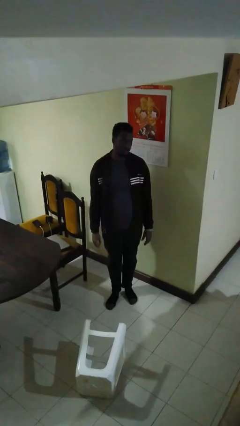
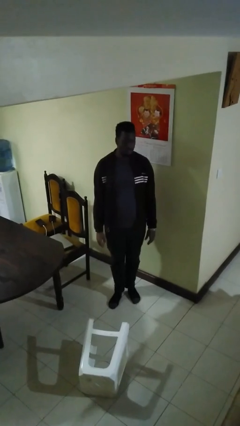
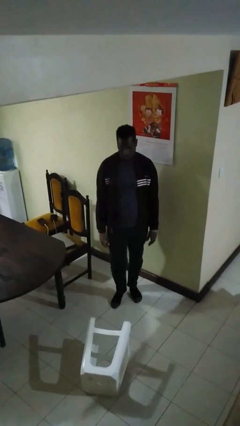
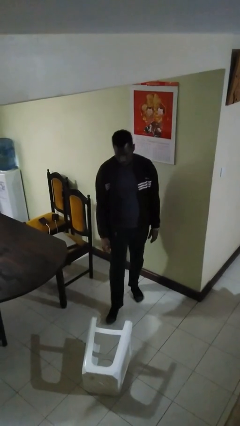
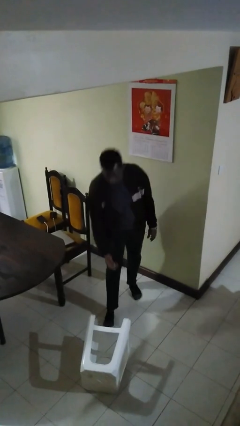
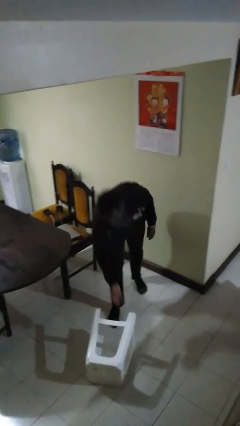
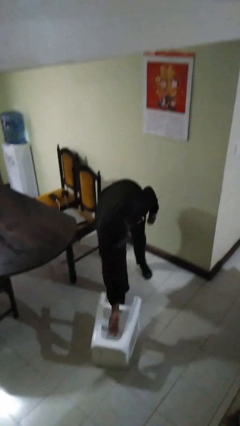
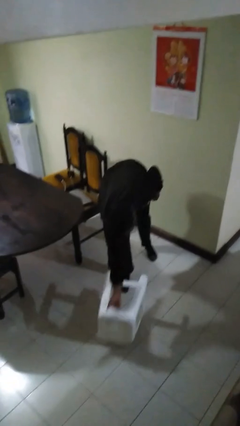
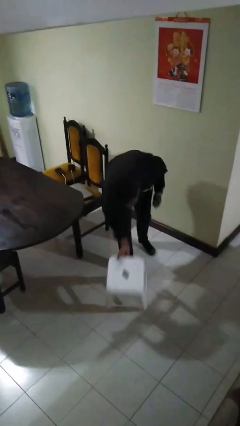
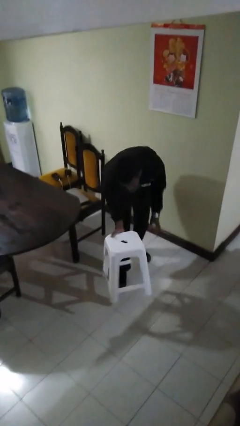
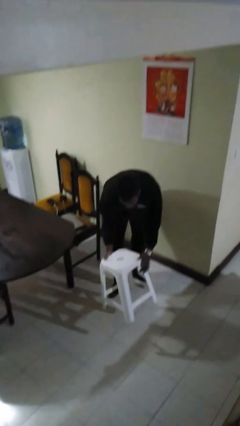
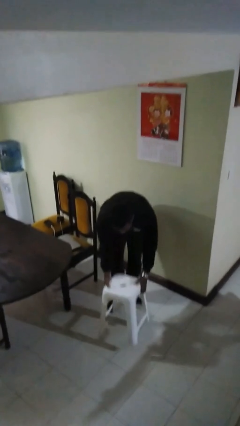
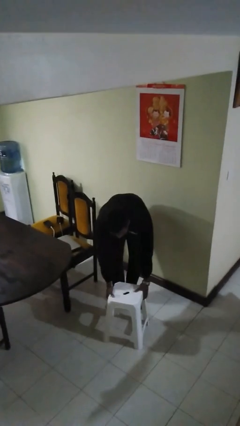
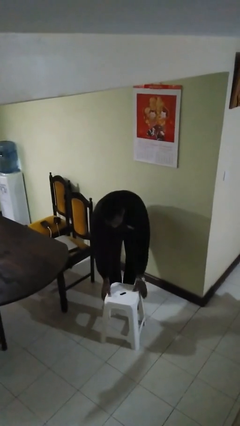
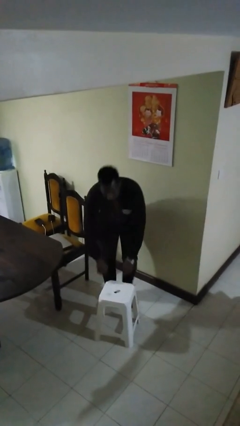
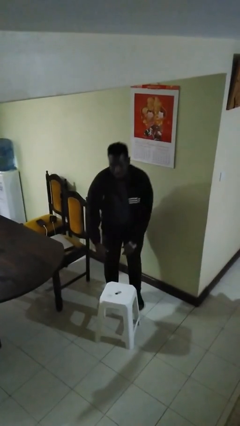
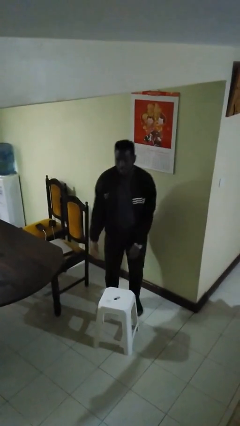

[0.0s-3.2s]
person sets upright furniture

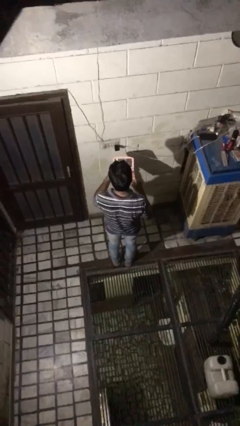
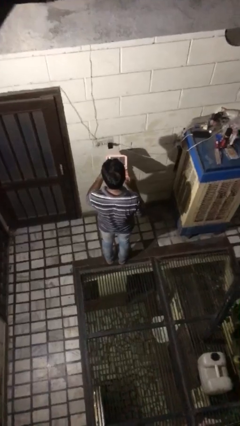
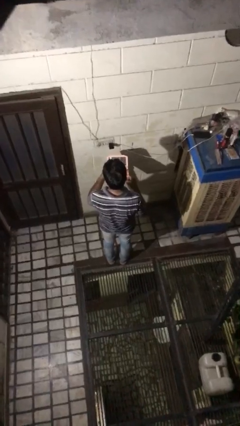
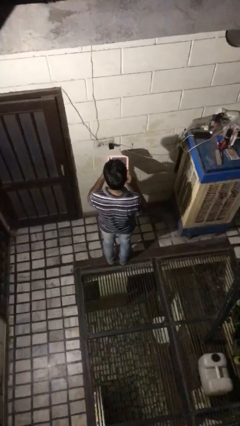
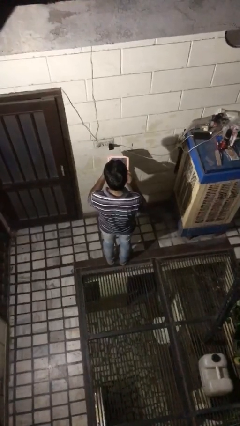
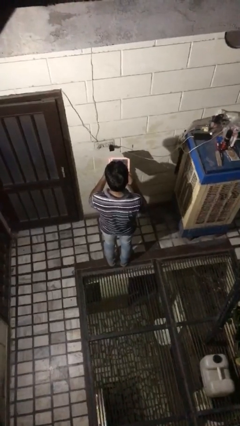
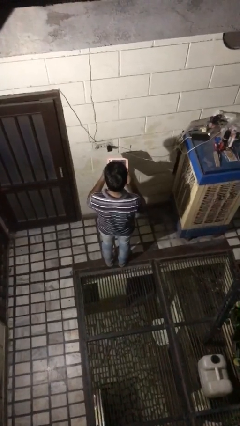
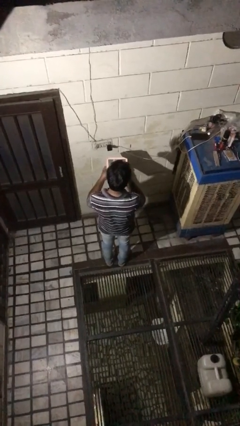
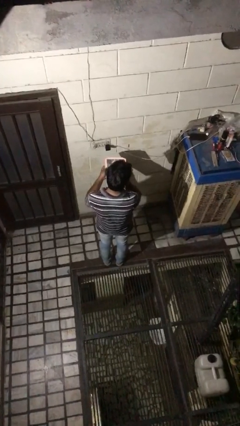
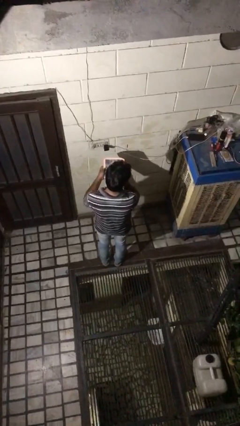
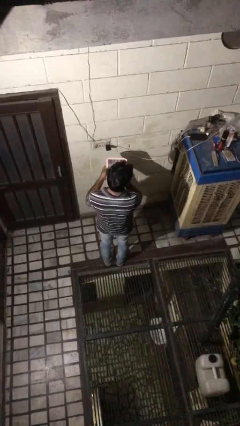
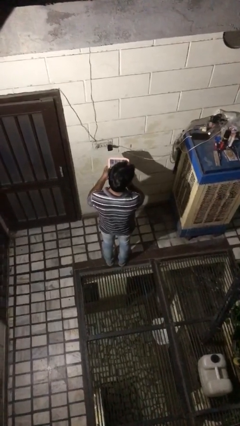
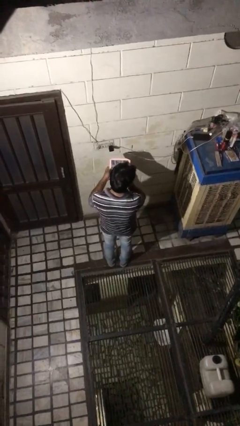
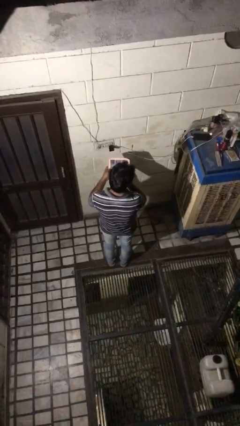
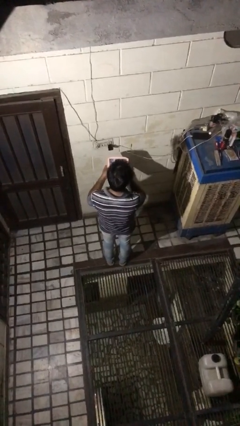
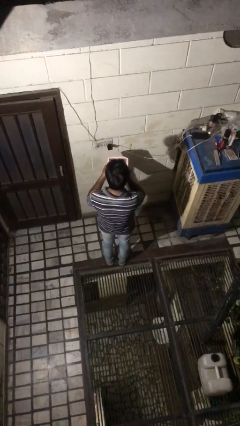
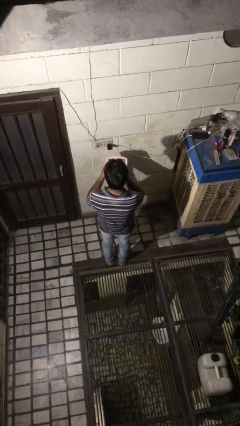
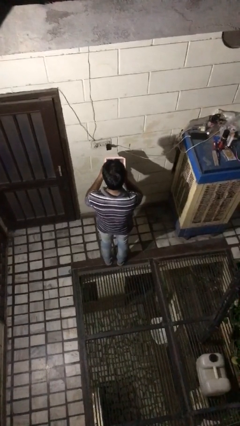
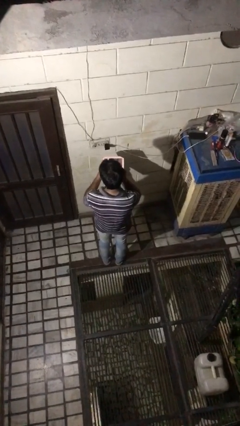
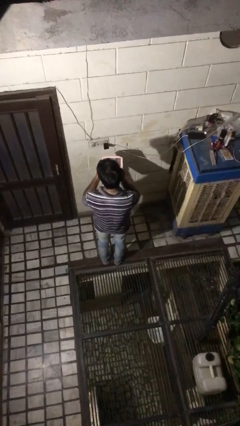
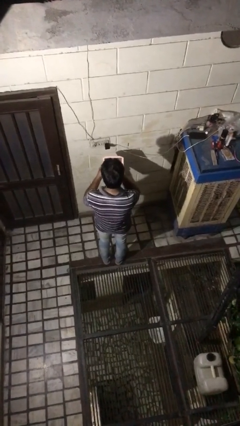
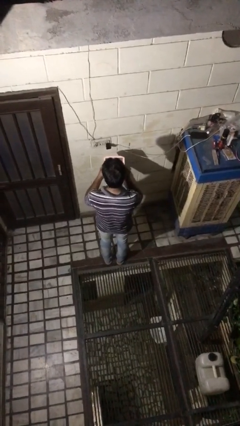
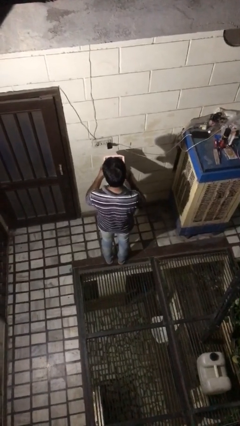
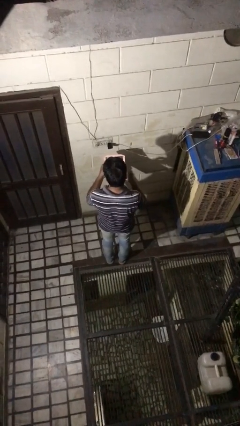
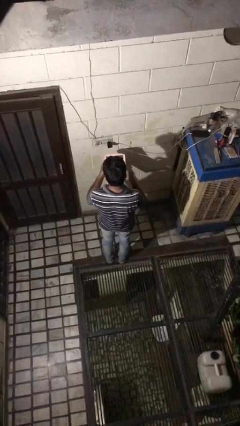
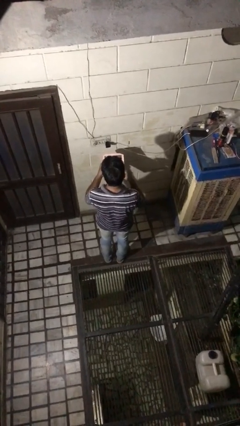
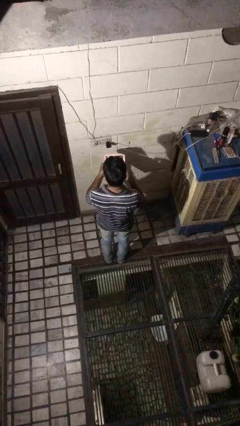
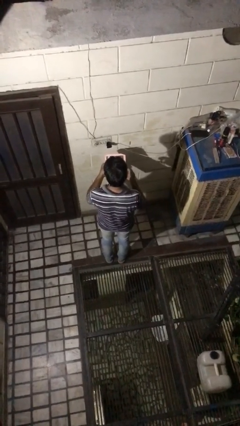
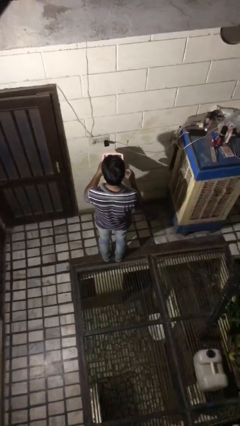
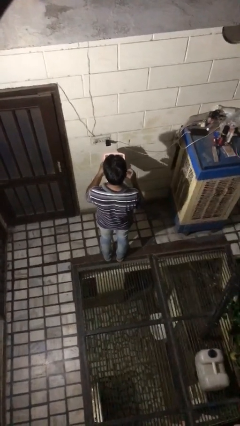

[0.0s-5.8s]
person applies foundation makeup

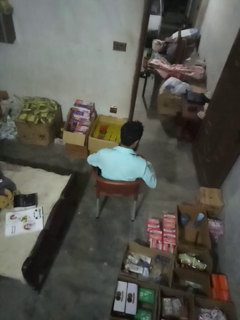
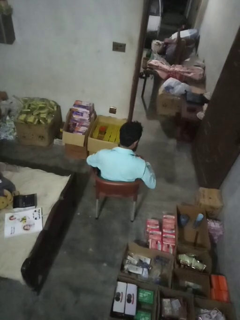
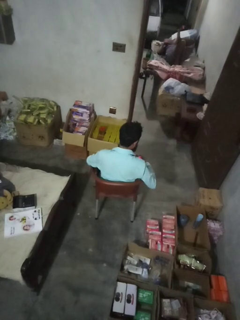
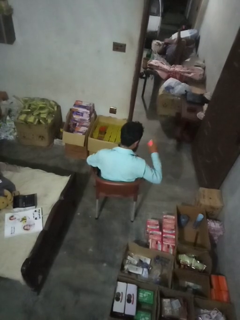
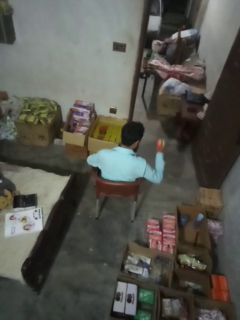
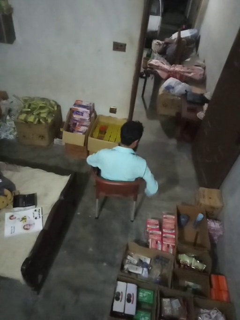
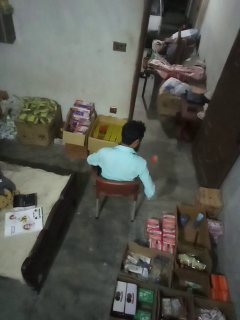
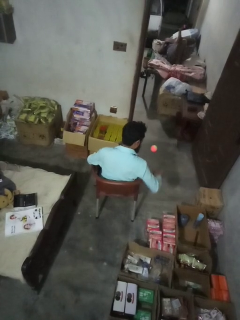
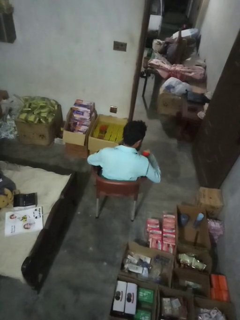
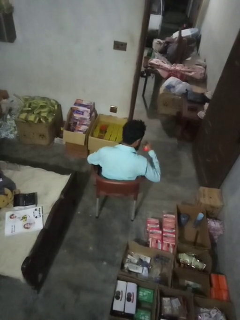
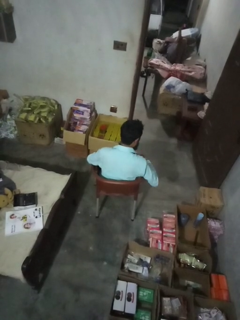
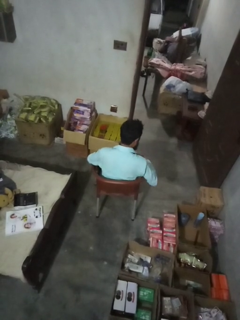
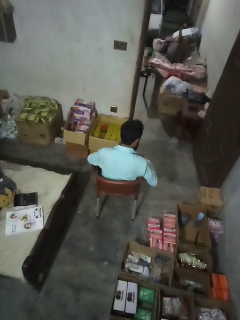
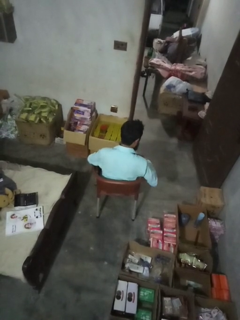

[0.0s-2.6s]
person bounces ball on floor

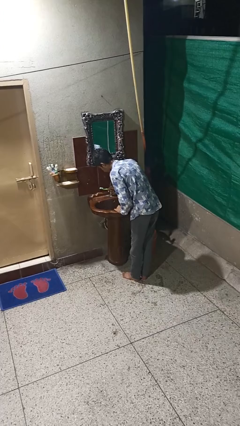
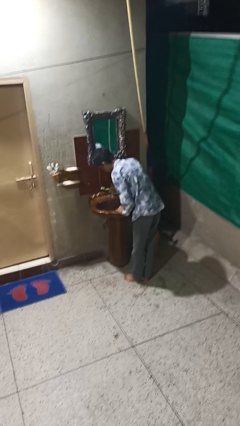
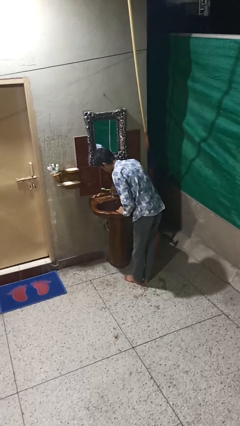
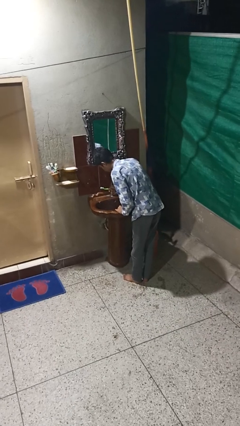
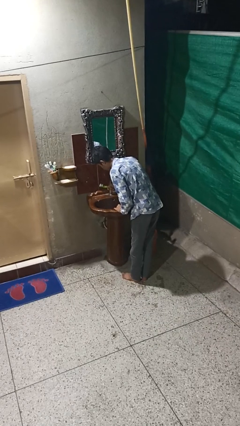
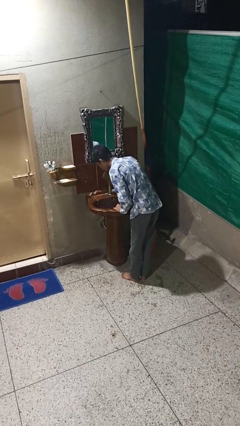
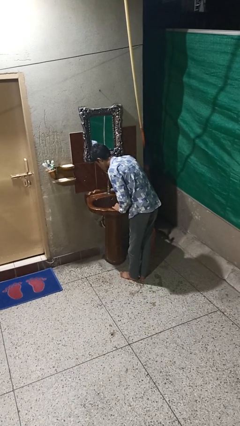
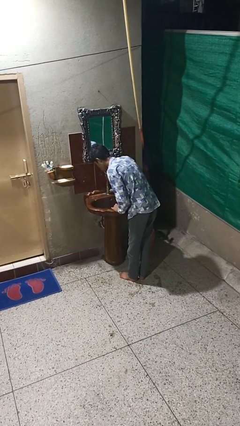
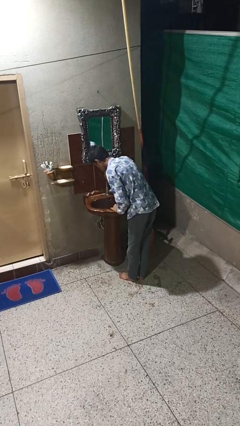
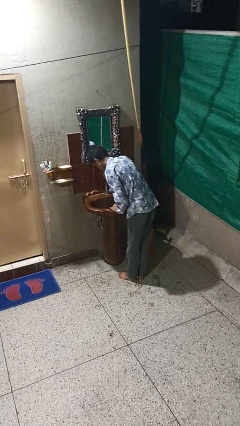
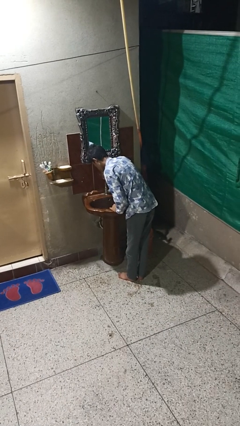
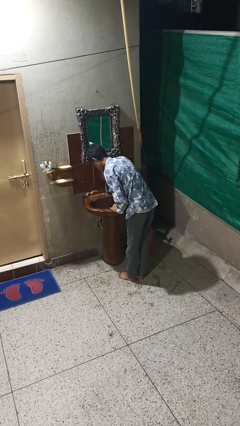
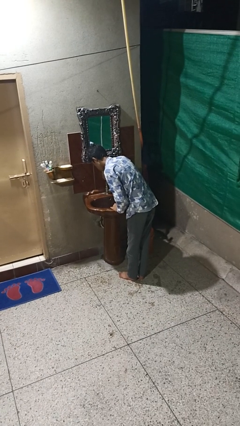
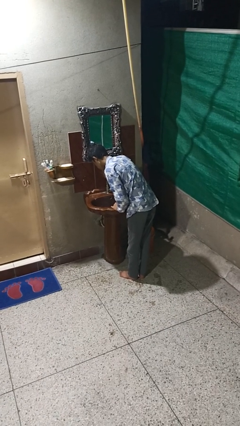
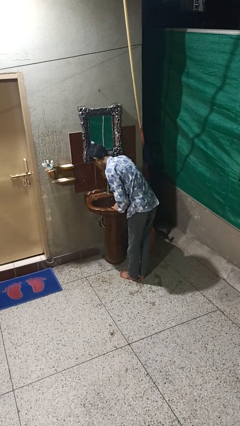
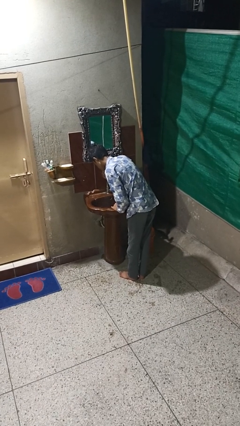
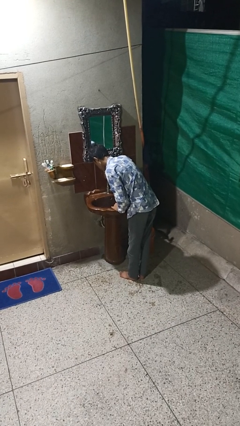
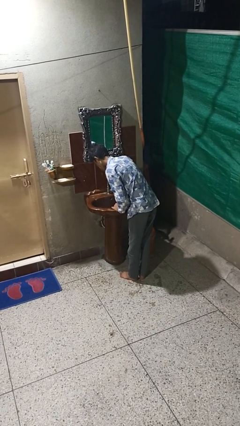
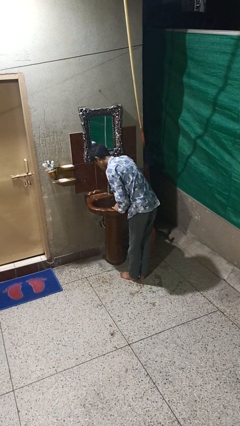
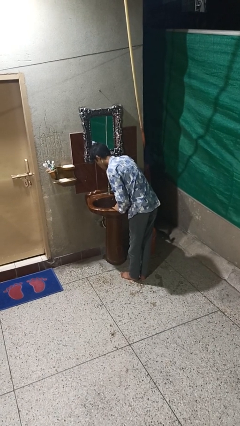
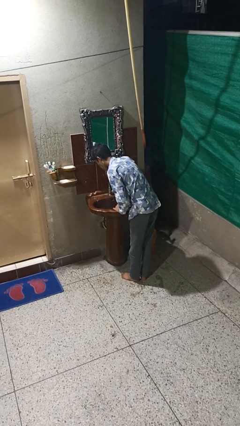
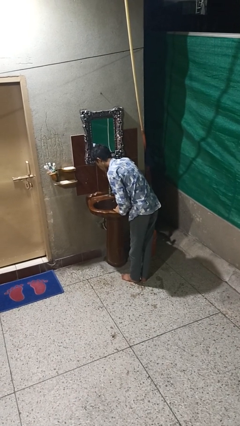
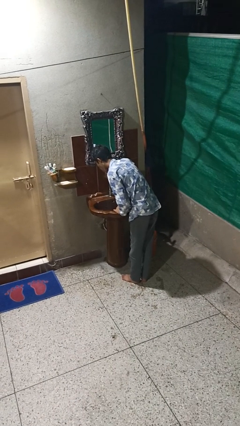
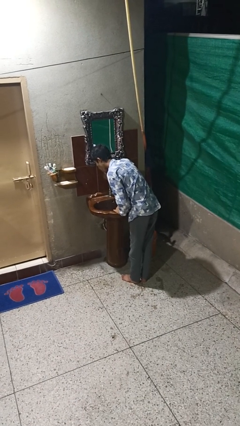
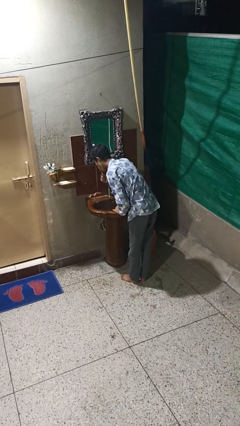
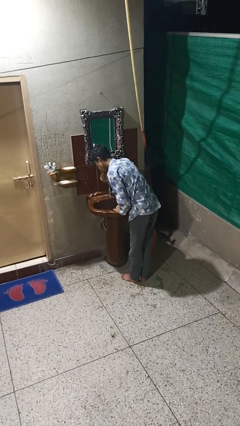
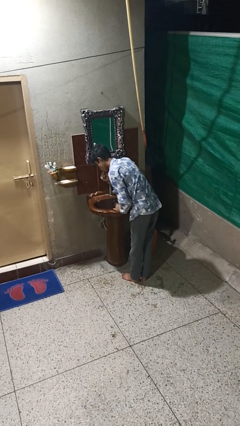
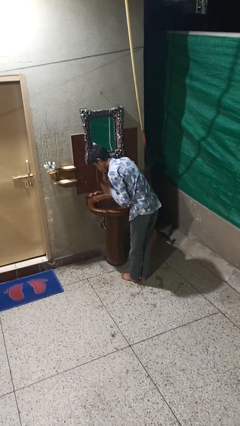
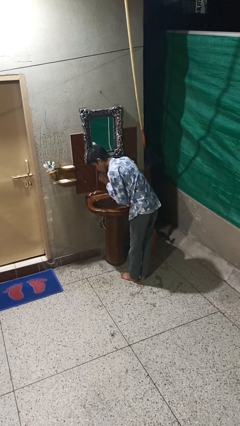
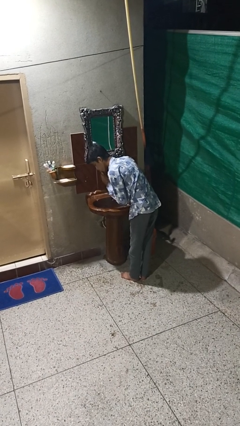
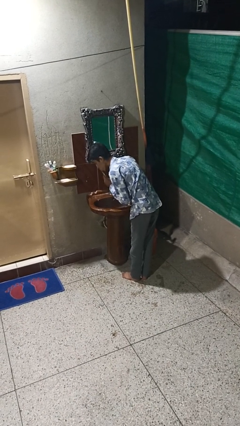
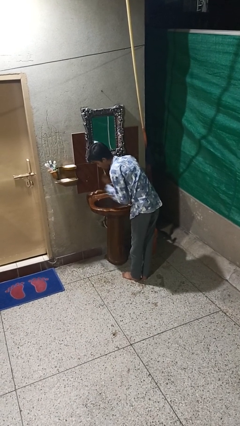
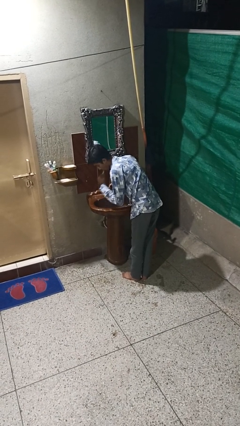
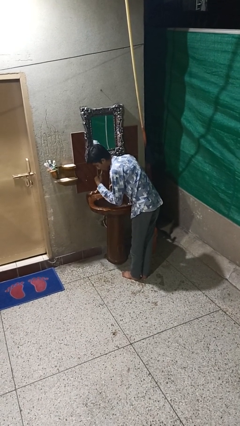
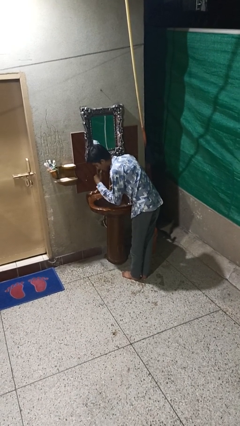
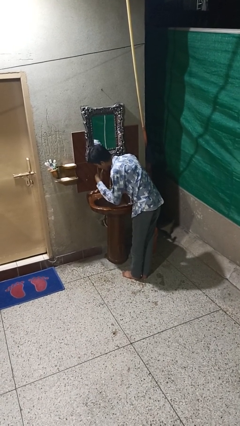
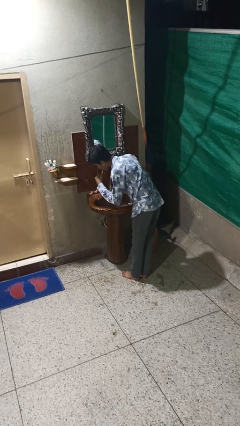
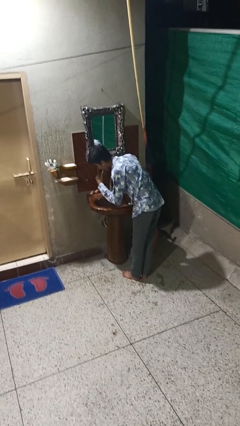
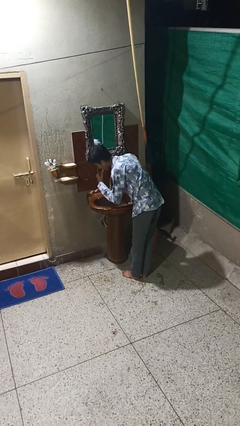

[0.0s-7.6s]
person brushes teeth
